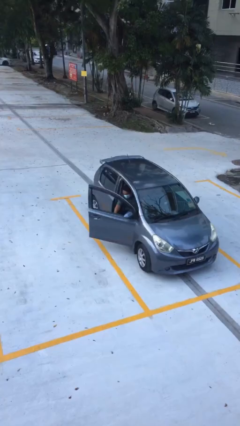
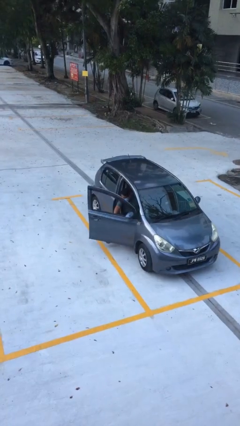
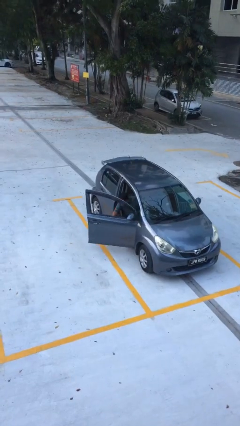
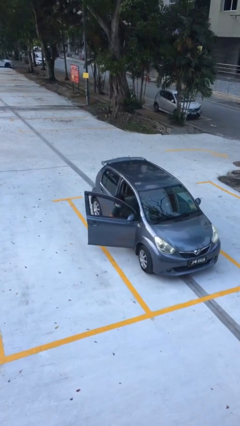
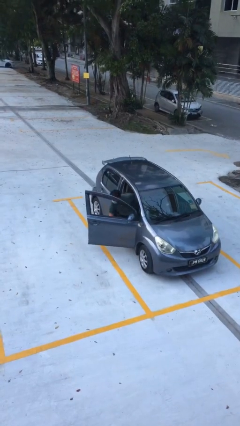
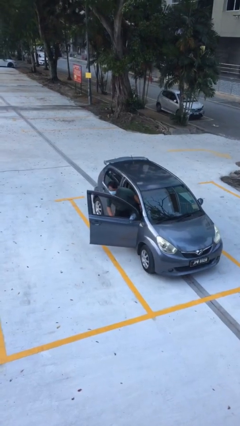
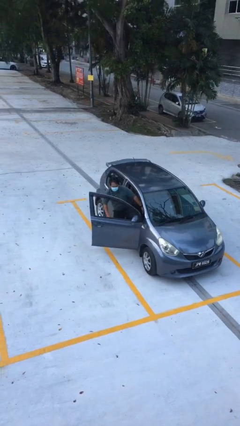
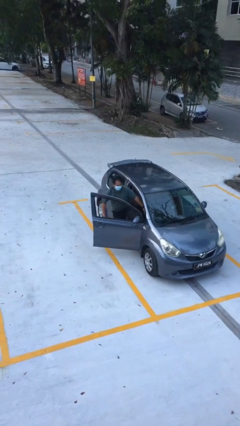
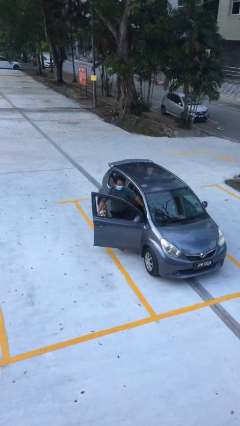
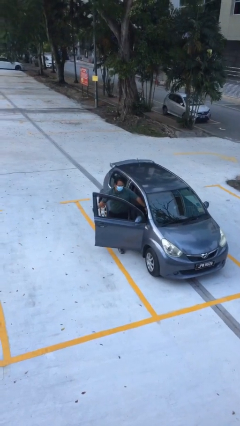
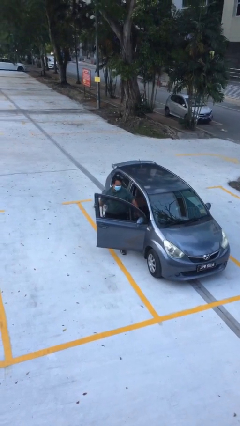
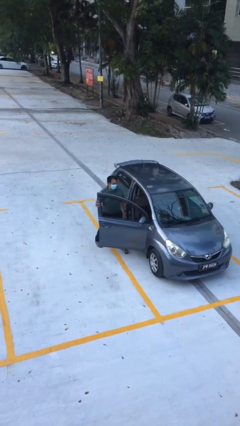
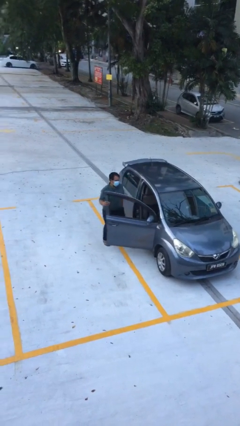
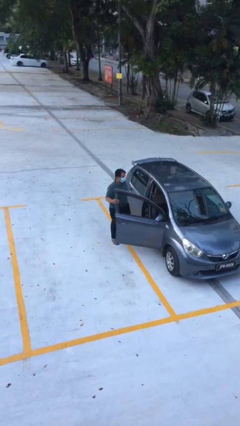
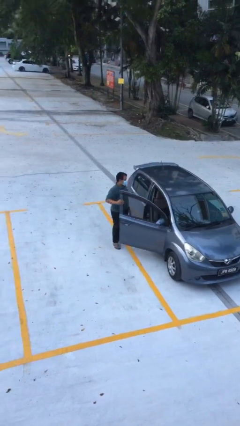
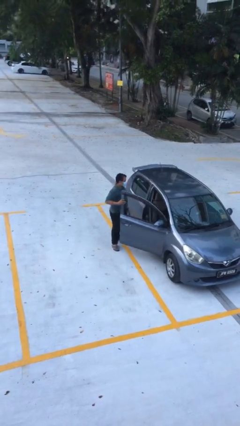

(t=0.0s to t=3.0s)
person exits car

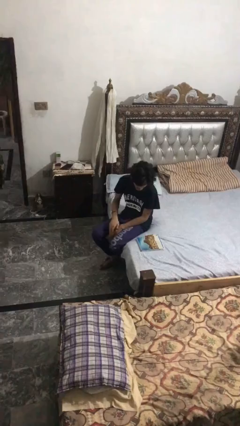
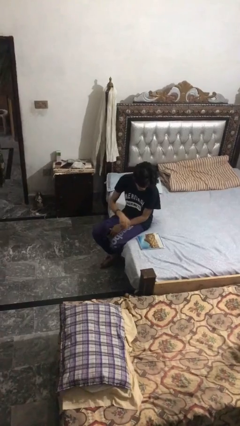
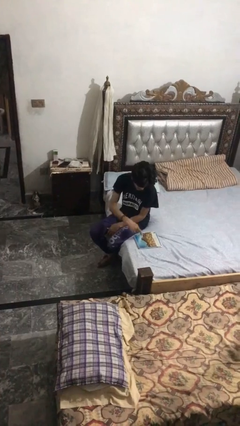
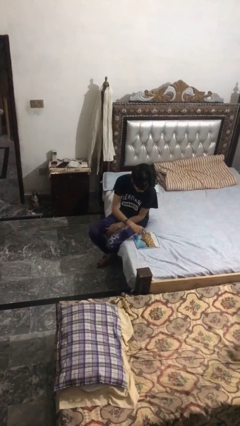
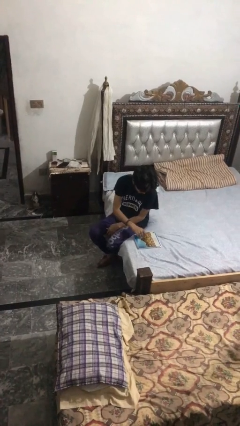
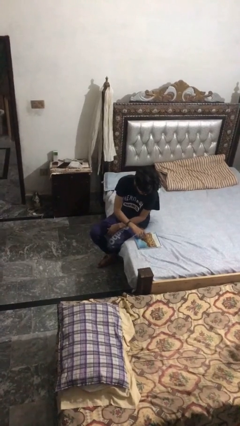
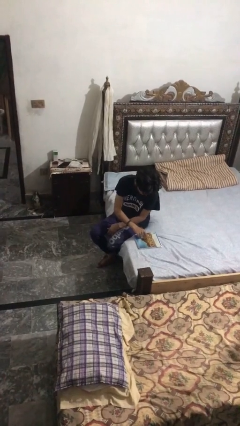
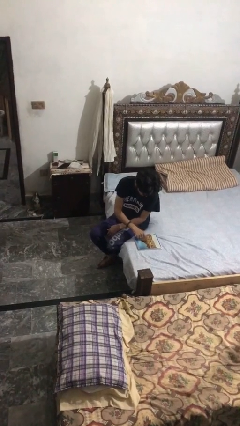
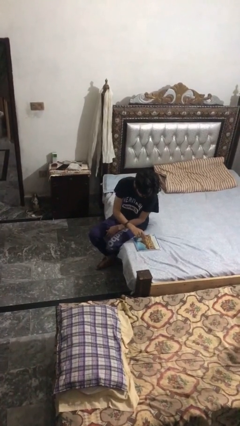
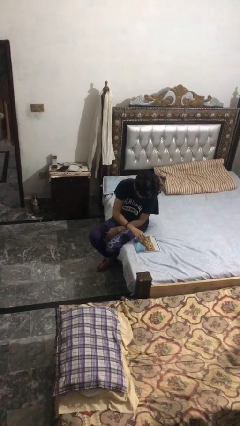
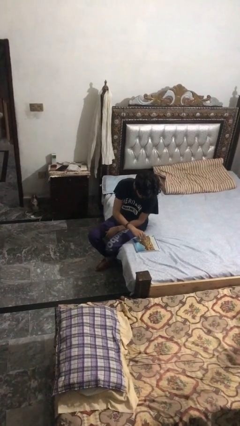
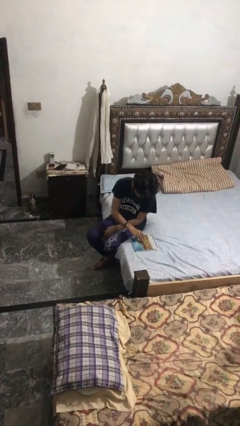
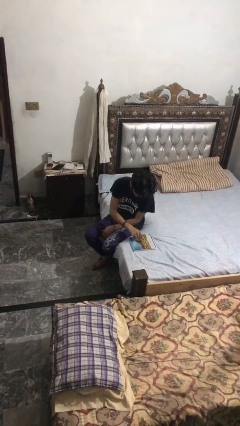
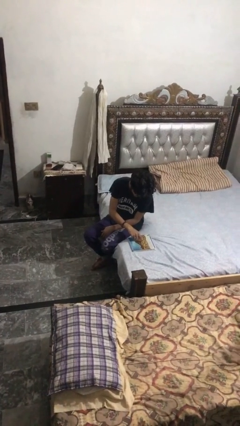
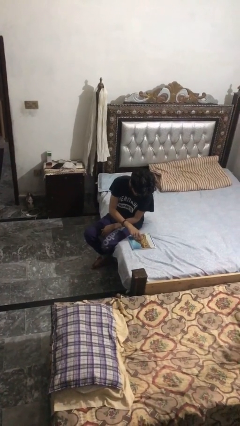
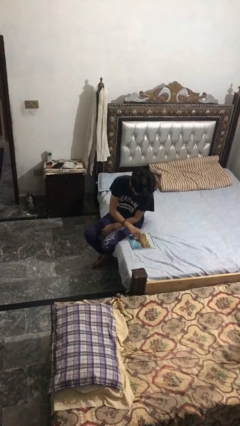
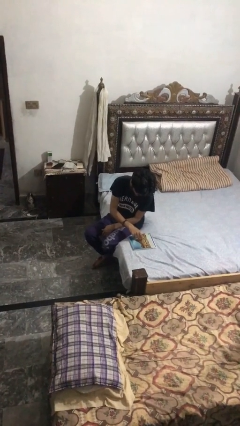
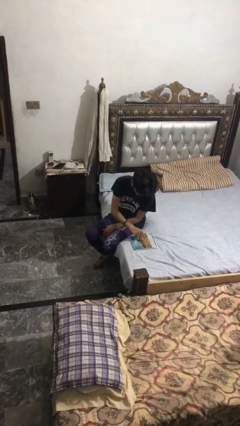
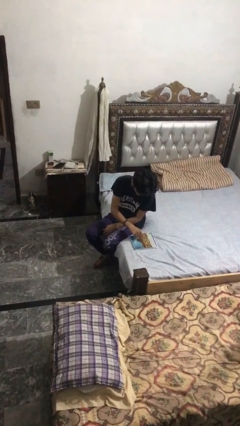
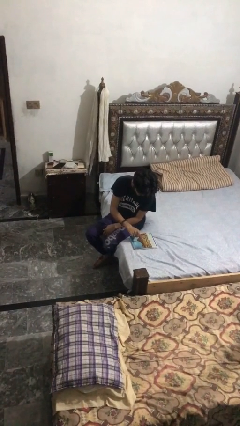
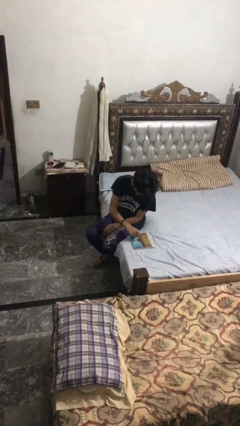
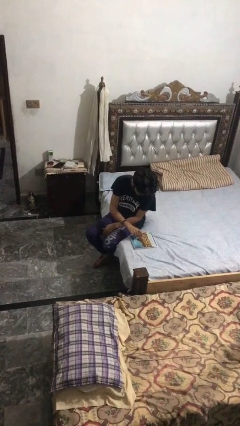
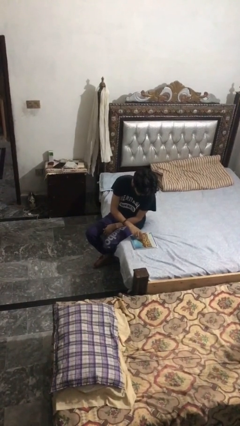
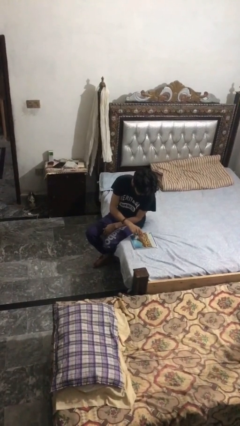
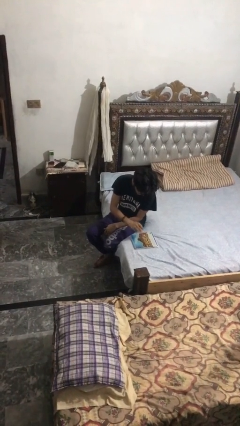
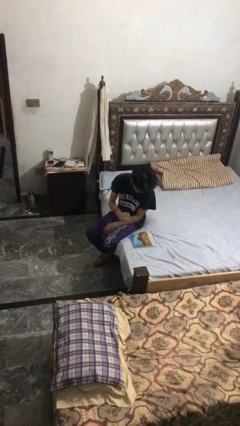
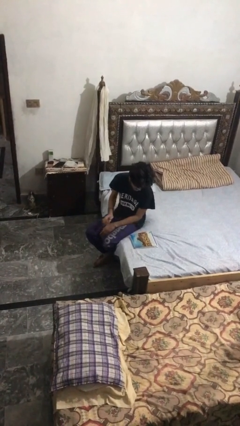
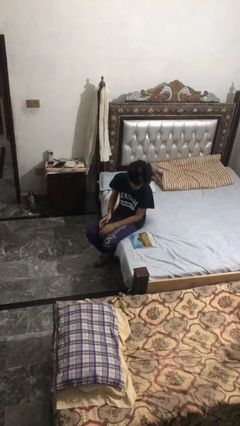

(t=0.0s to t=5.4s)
person taps object with finger

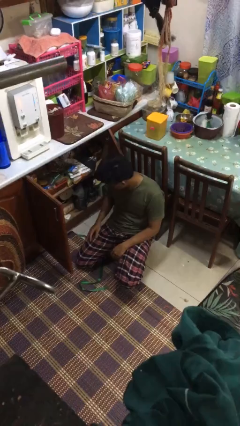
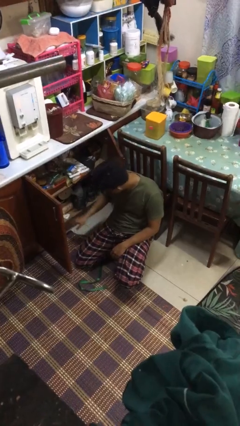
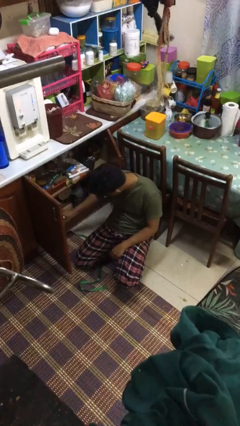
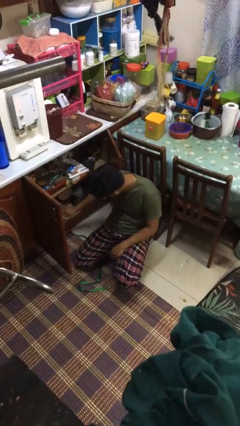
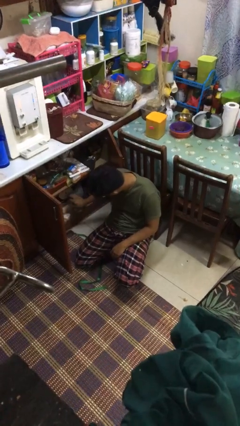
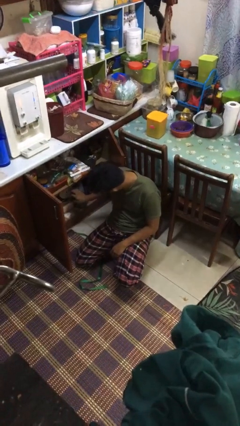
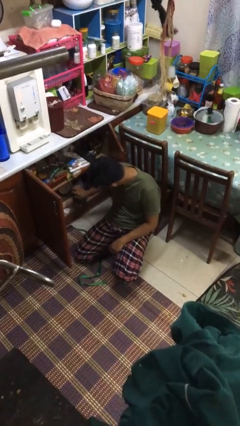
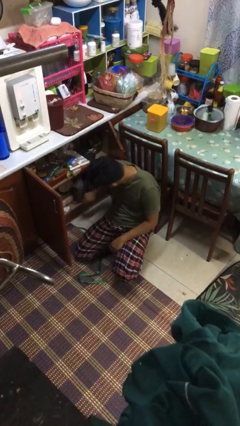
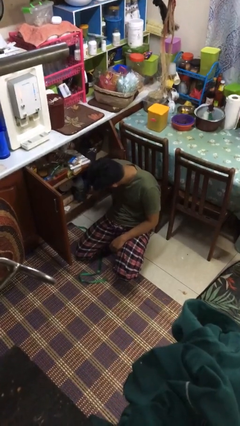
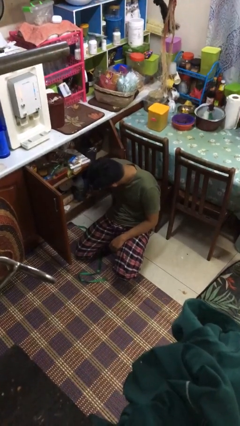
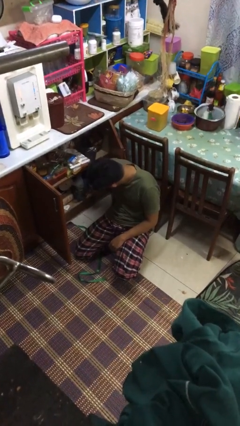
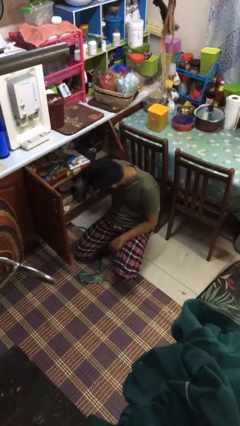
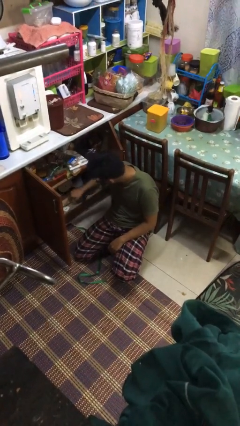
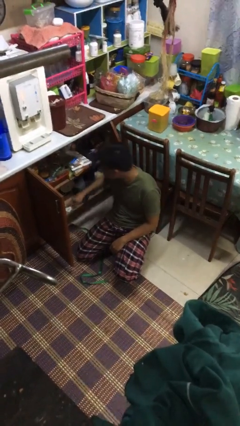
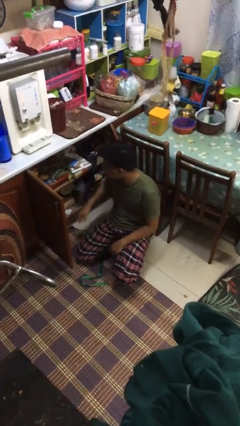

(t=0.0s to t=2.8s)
person searches in kitchen drawer

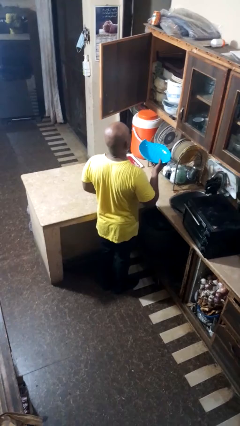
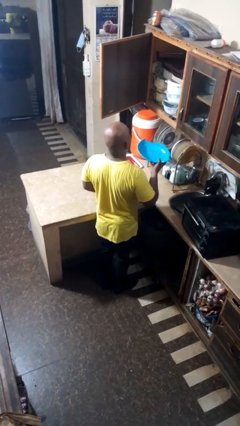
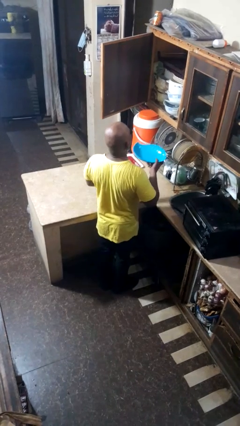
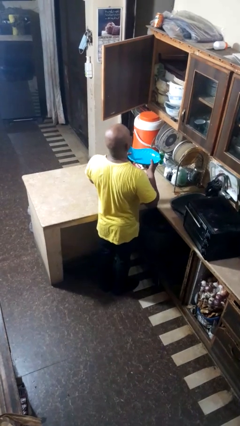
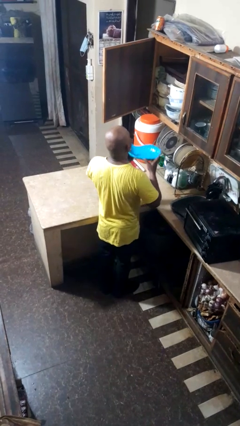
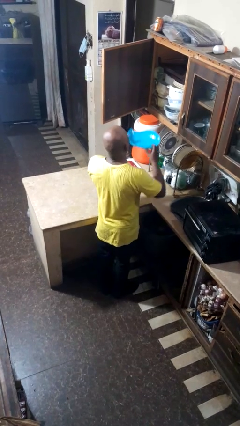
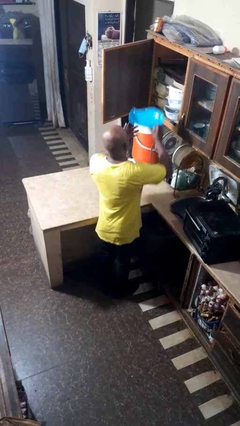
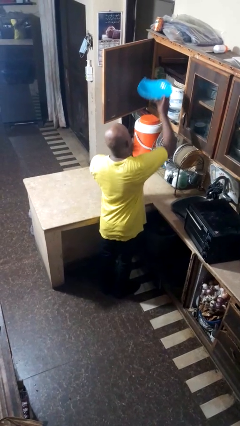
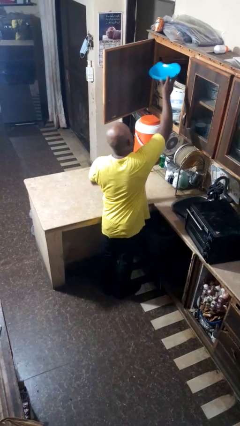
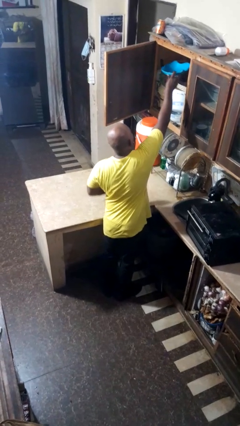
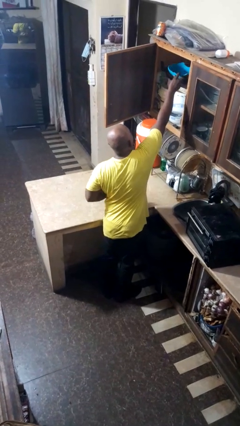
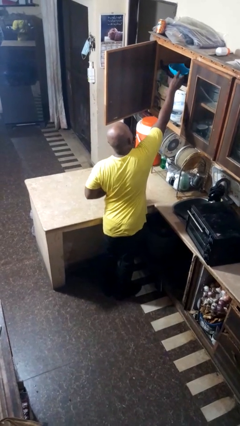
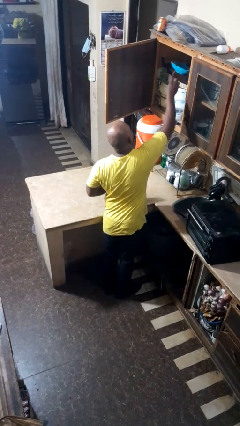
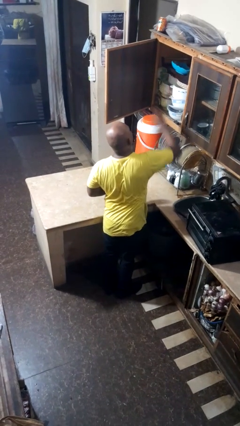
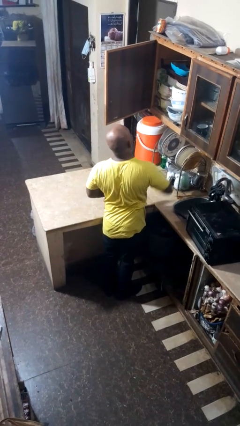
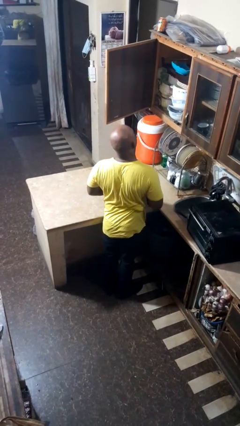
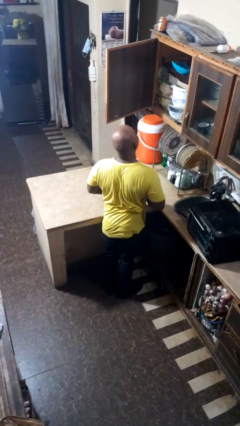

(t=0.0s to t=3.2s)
person puts object in cabinet

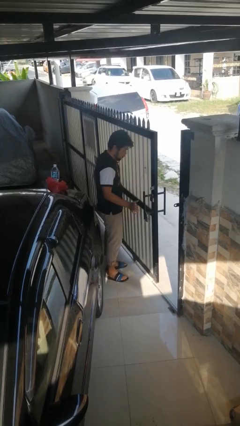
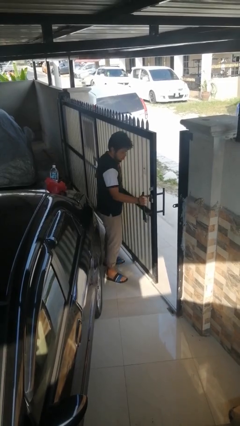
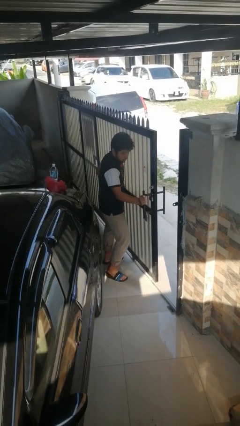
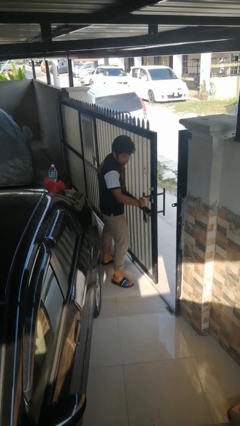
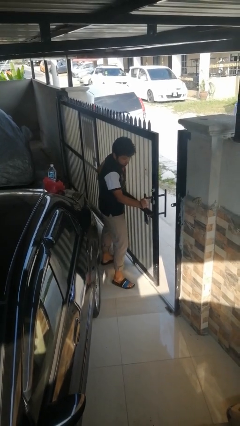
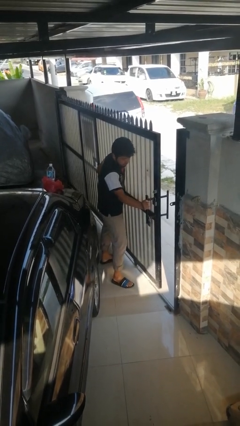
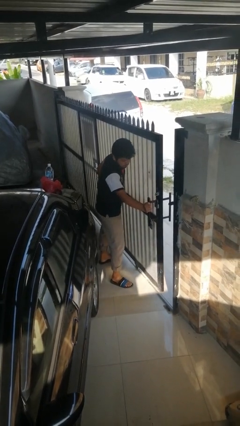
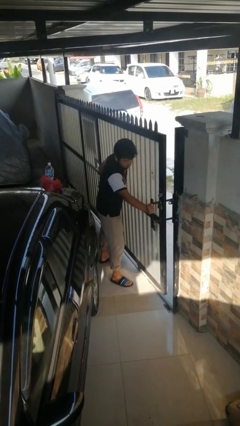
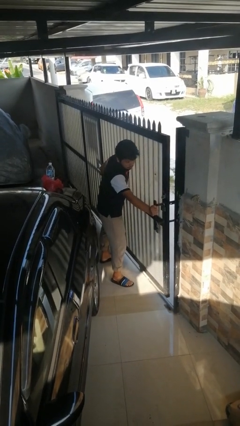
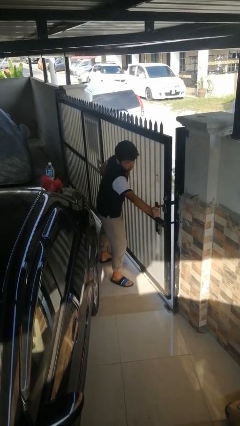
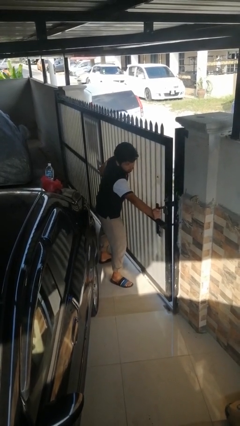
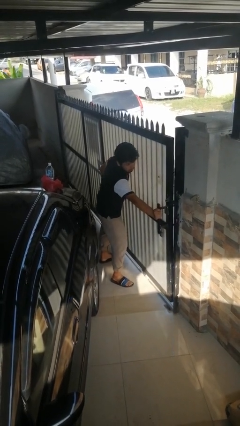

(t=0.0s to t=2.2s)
person closes sliding door

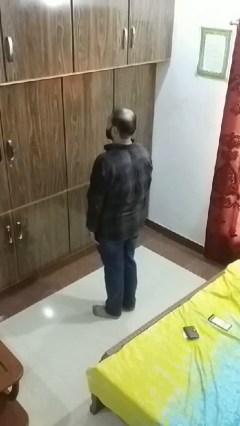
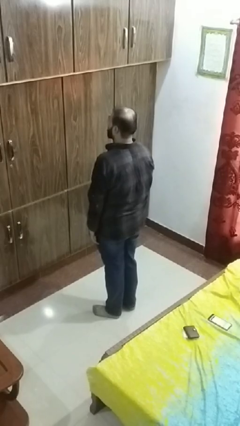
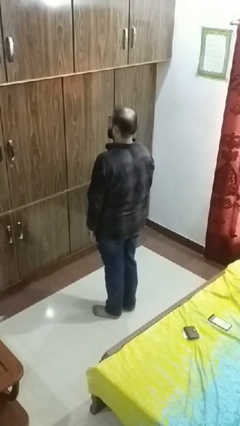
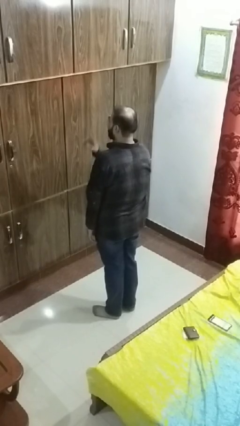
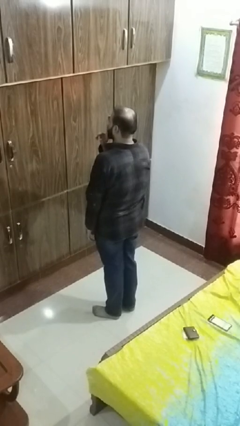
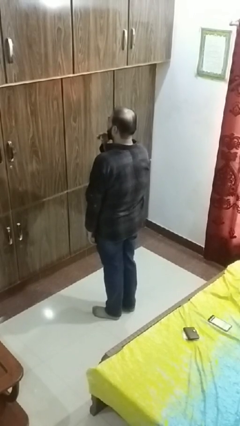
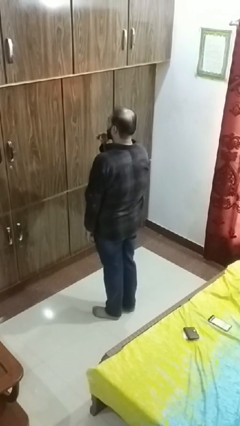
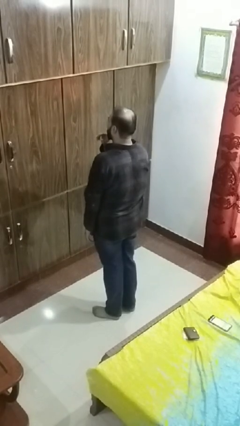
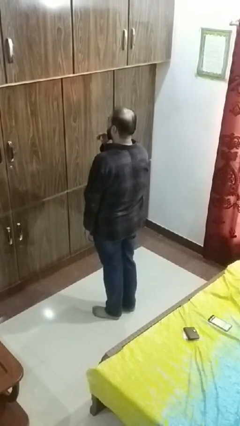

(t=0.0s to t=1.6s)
person gestures be quiet
